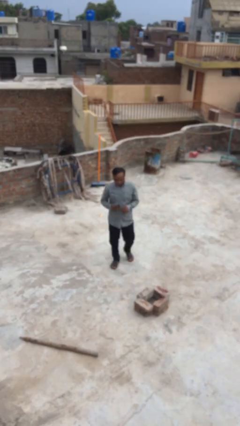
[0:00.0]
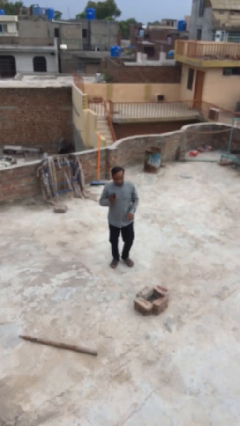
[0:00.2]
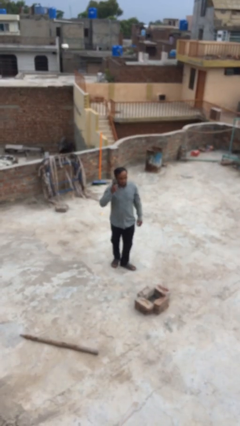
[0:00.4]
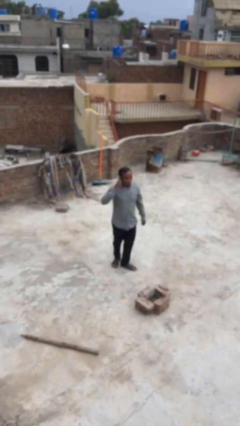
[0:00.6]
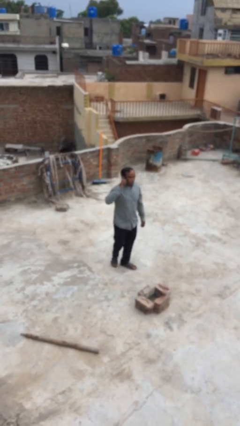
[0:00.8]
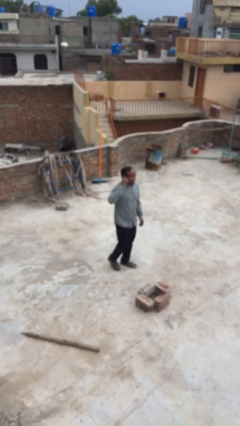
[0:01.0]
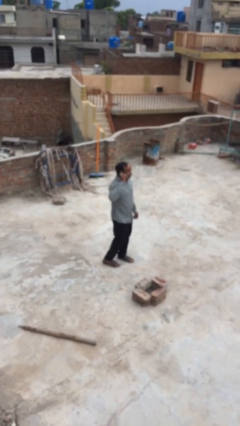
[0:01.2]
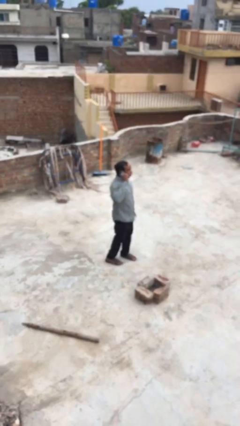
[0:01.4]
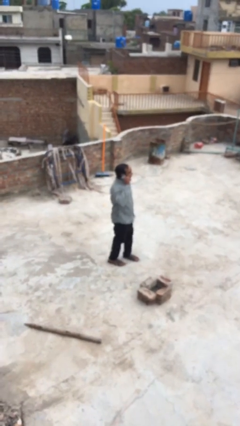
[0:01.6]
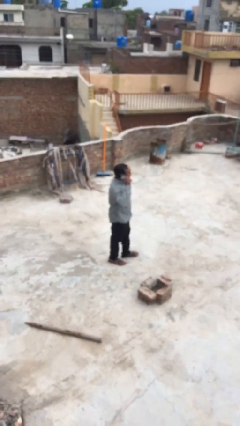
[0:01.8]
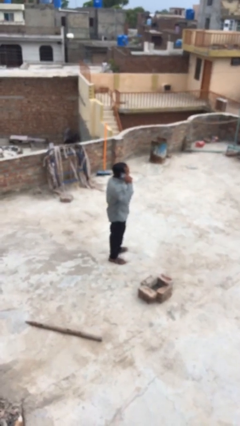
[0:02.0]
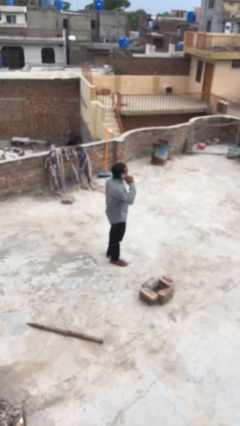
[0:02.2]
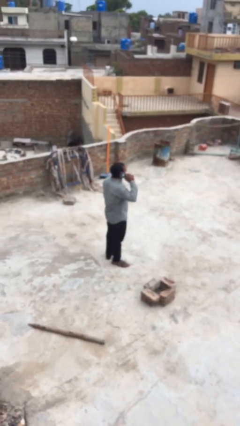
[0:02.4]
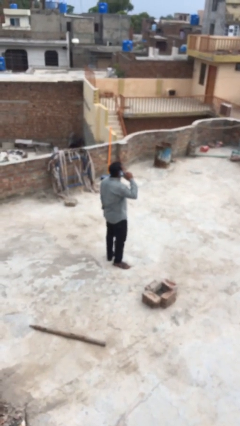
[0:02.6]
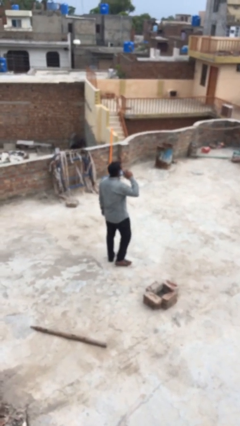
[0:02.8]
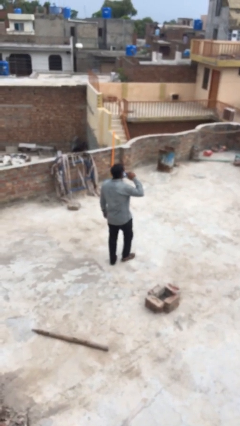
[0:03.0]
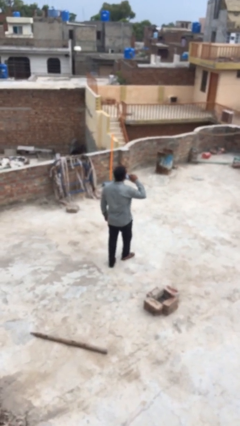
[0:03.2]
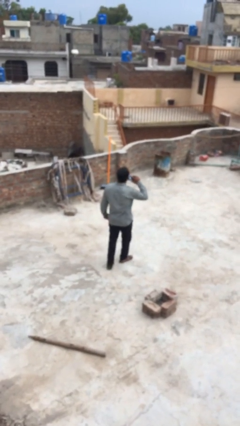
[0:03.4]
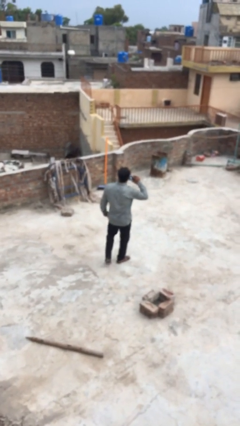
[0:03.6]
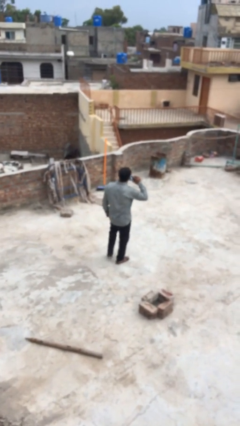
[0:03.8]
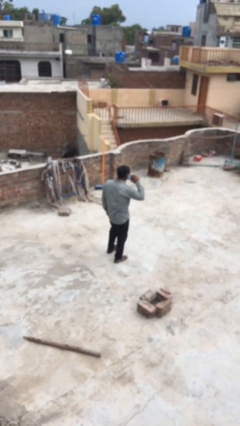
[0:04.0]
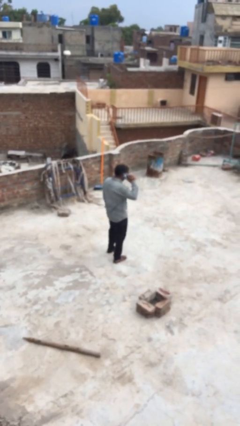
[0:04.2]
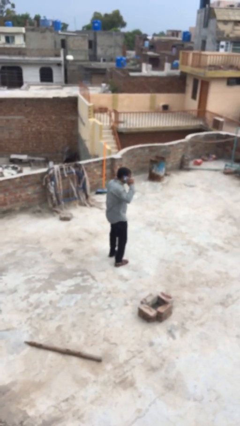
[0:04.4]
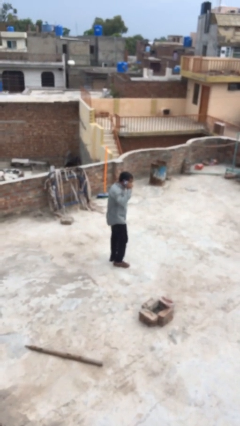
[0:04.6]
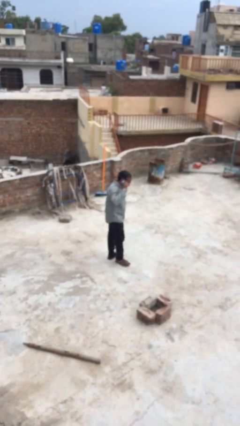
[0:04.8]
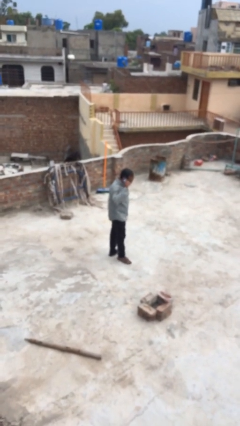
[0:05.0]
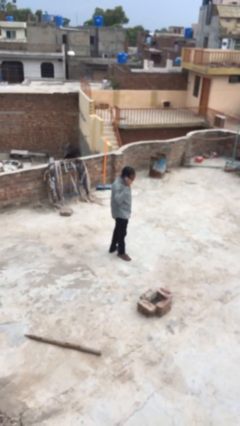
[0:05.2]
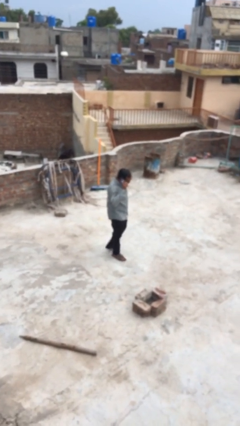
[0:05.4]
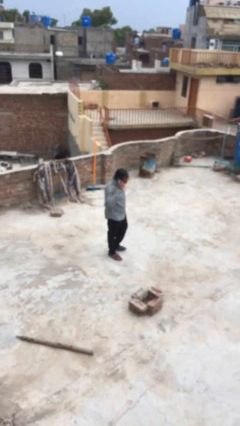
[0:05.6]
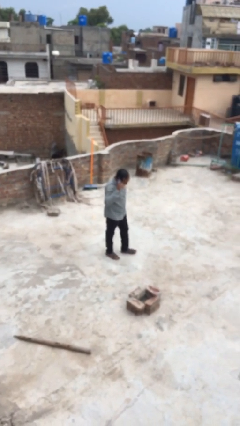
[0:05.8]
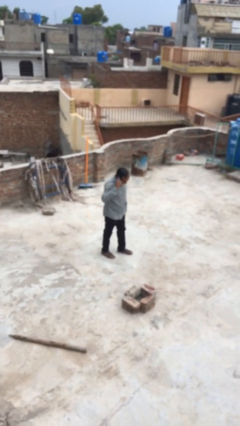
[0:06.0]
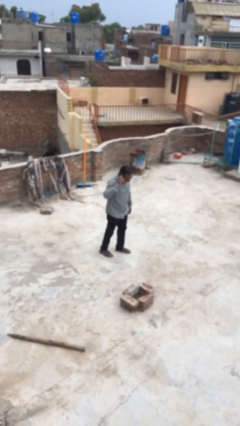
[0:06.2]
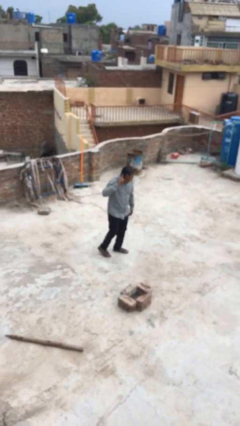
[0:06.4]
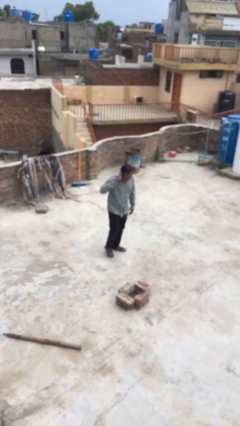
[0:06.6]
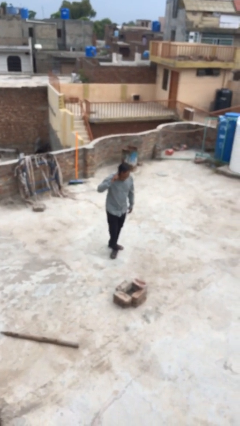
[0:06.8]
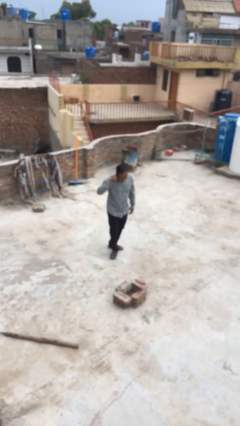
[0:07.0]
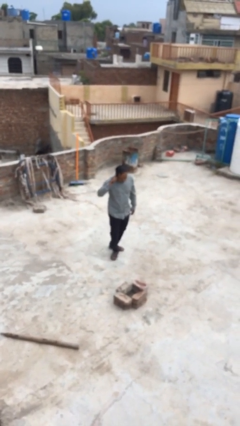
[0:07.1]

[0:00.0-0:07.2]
person talks on phone

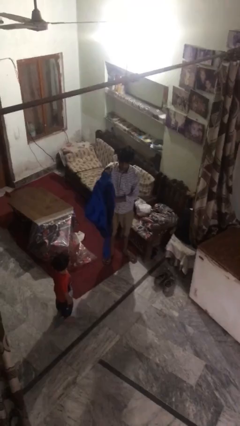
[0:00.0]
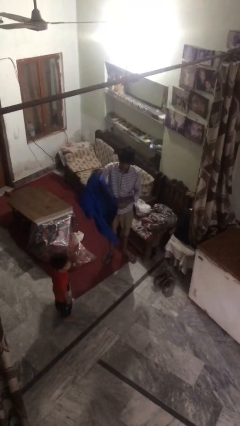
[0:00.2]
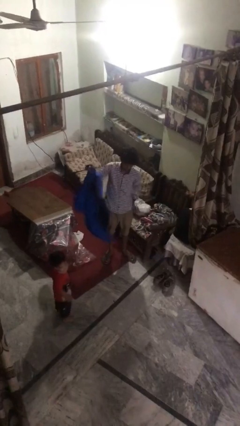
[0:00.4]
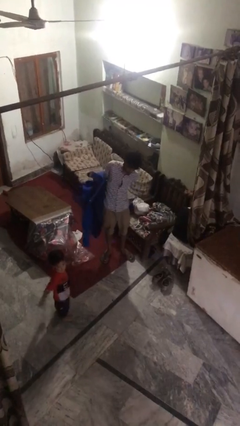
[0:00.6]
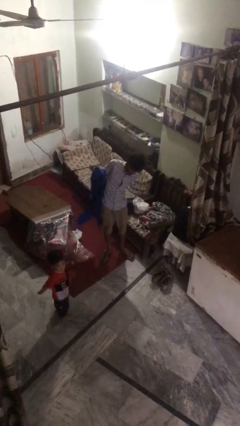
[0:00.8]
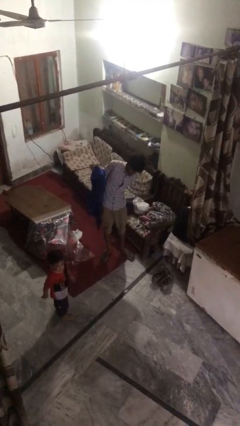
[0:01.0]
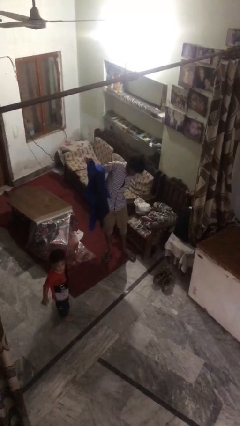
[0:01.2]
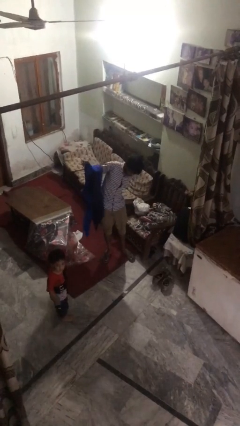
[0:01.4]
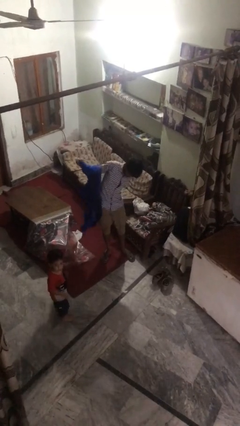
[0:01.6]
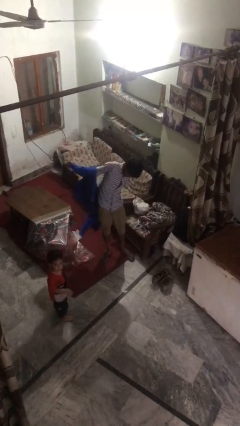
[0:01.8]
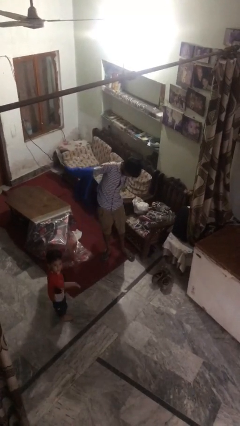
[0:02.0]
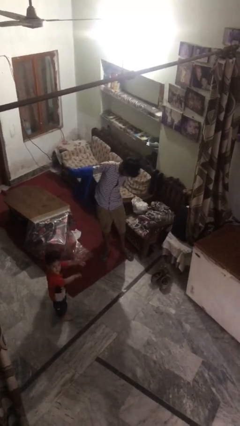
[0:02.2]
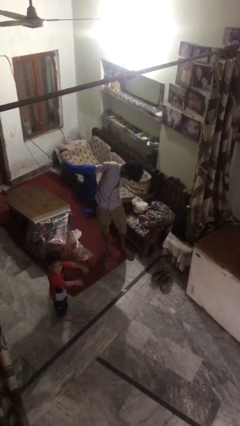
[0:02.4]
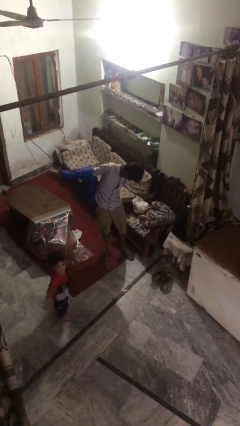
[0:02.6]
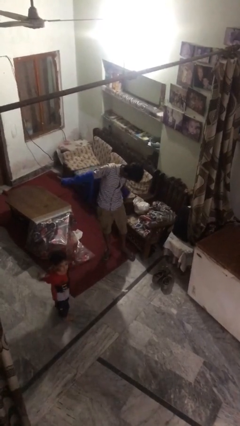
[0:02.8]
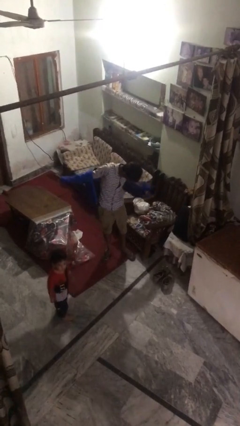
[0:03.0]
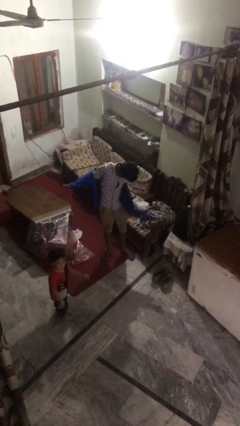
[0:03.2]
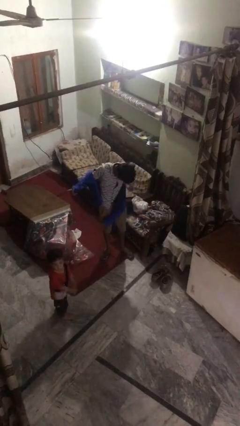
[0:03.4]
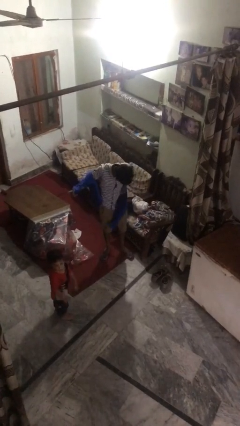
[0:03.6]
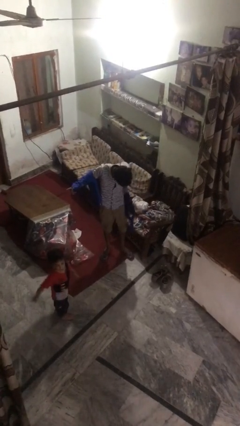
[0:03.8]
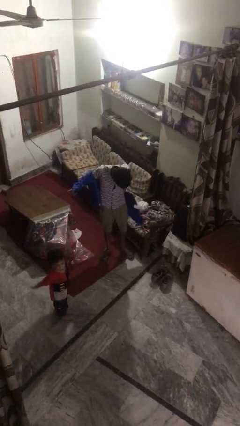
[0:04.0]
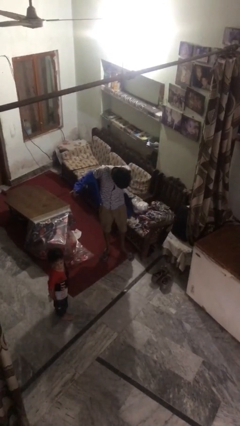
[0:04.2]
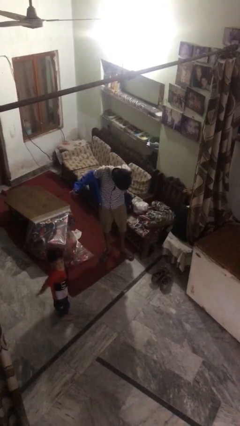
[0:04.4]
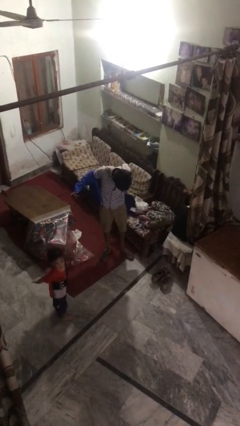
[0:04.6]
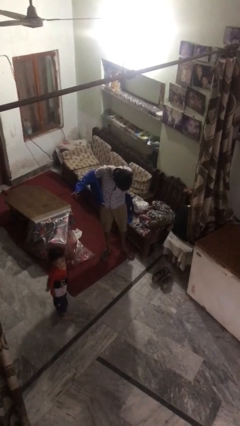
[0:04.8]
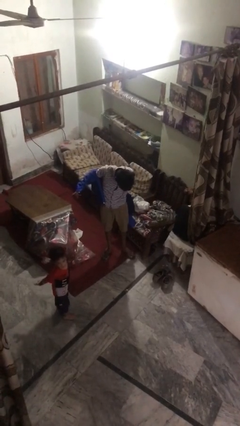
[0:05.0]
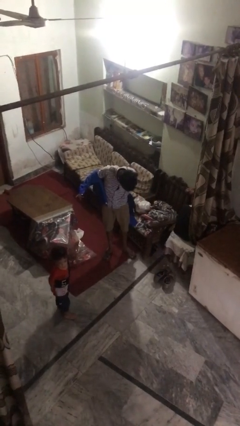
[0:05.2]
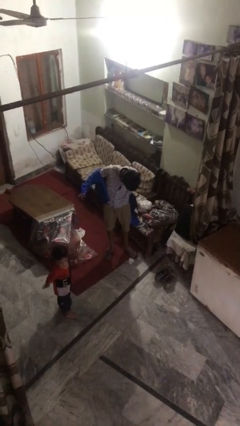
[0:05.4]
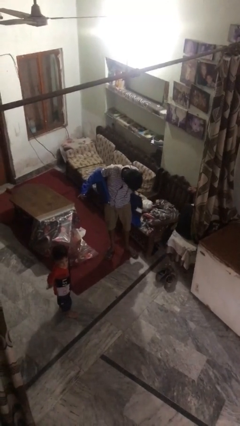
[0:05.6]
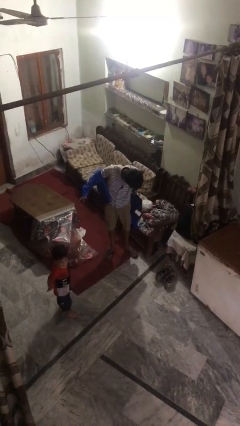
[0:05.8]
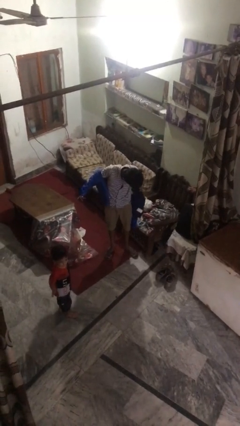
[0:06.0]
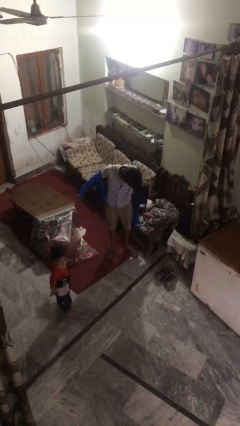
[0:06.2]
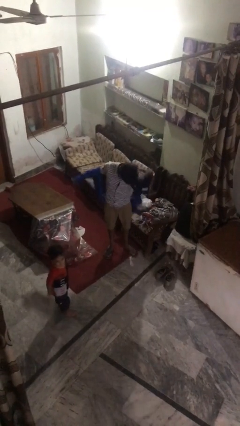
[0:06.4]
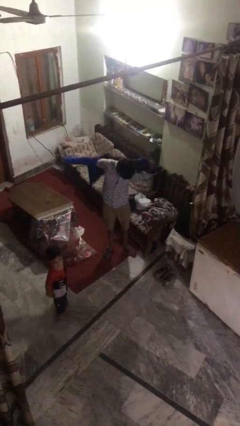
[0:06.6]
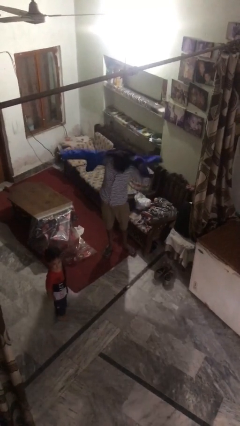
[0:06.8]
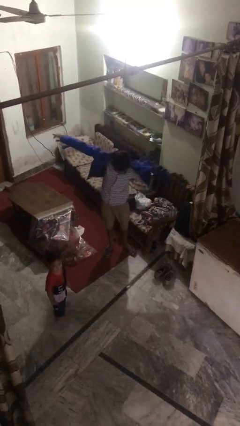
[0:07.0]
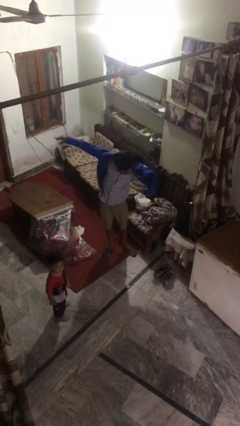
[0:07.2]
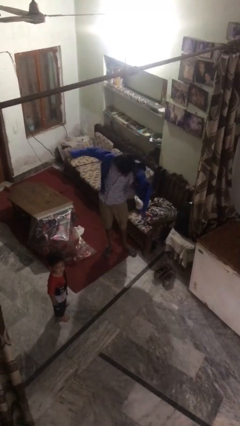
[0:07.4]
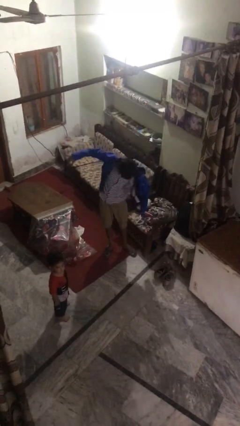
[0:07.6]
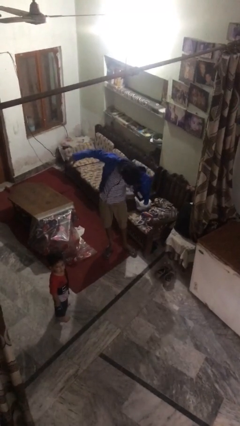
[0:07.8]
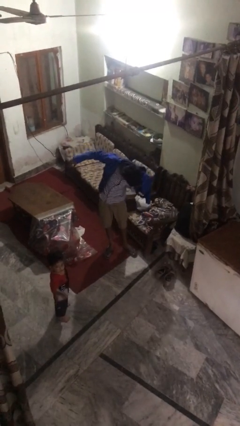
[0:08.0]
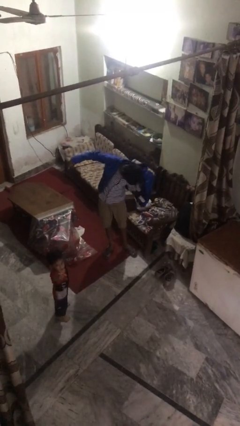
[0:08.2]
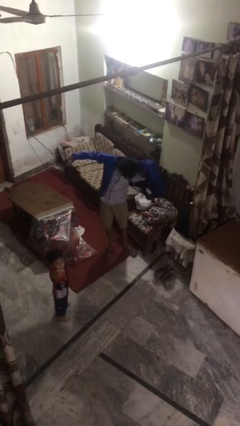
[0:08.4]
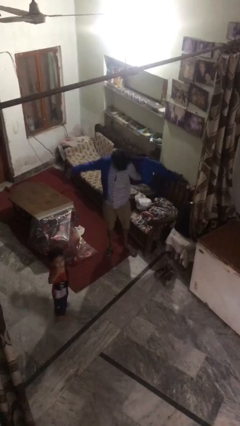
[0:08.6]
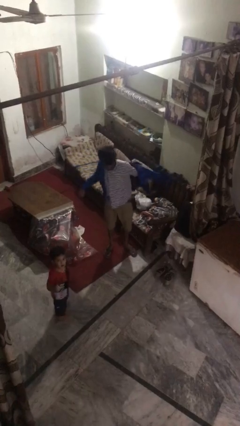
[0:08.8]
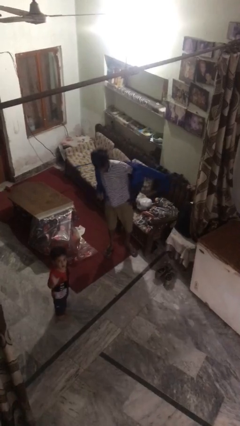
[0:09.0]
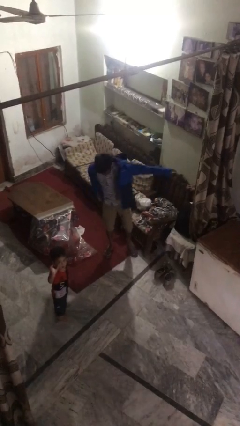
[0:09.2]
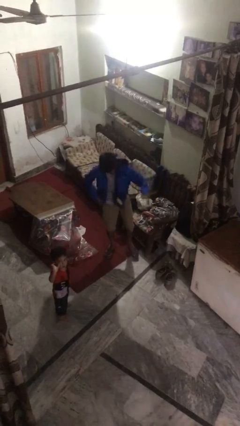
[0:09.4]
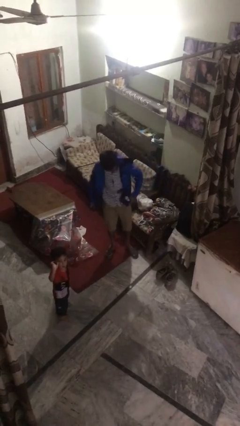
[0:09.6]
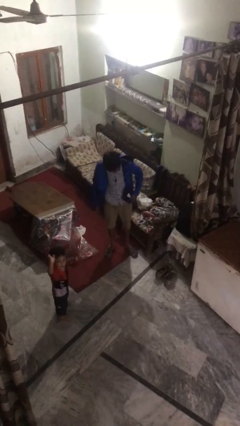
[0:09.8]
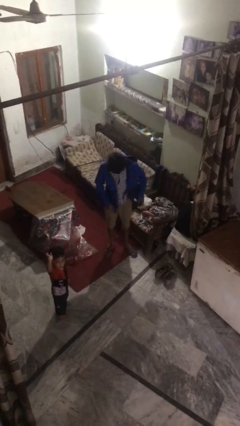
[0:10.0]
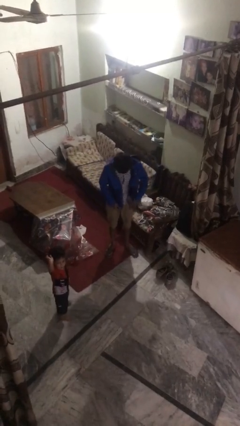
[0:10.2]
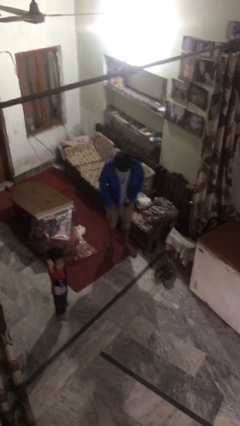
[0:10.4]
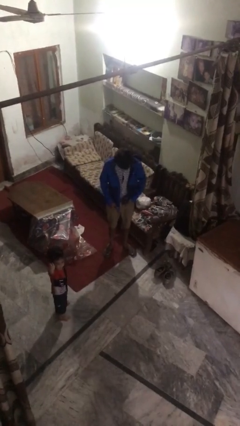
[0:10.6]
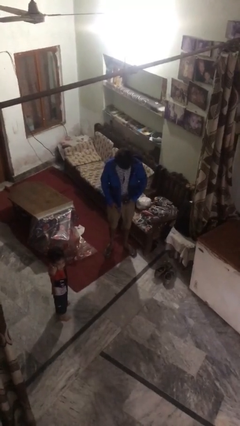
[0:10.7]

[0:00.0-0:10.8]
person puts on jacket

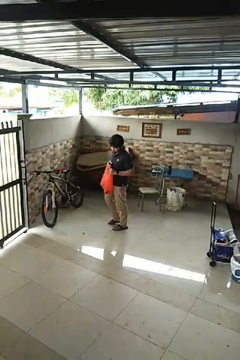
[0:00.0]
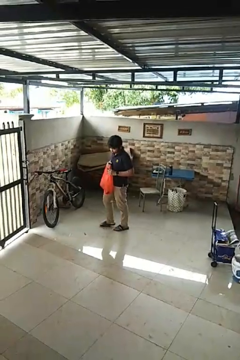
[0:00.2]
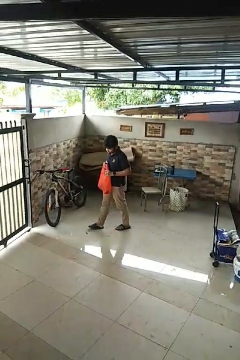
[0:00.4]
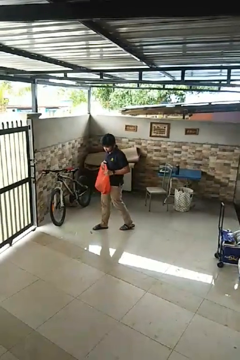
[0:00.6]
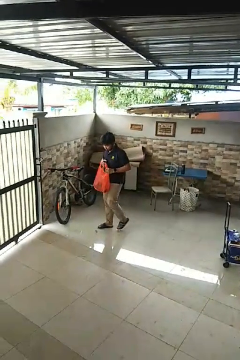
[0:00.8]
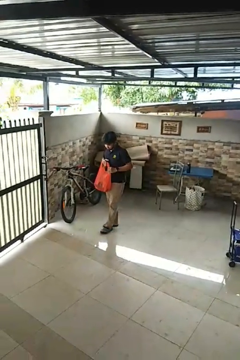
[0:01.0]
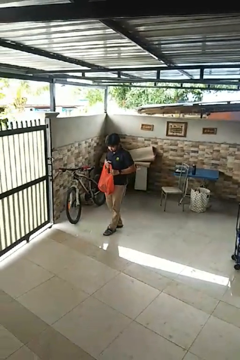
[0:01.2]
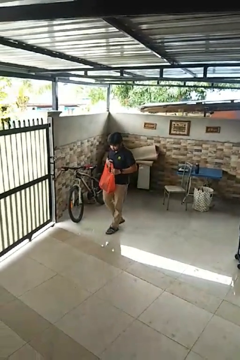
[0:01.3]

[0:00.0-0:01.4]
person carries groceries
